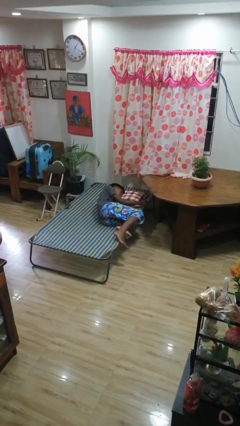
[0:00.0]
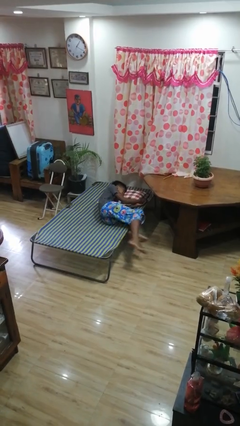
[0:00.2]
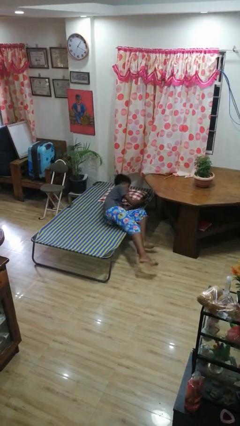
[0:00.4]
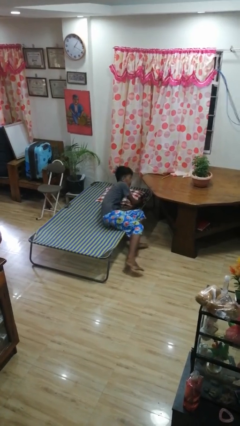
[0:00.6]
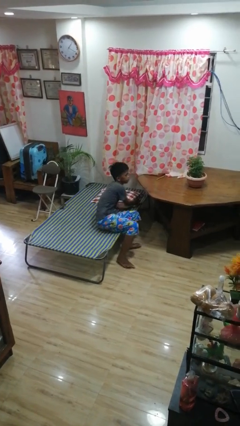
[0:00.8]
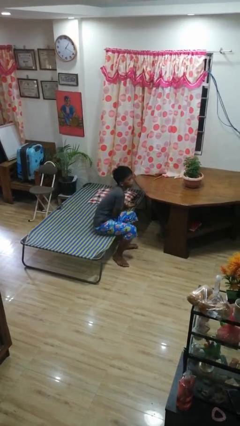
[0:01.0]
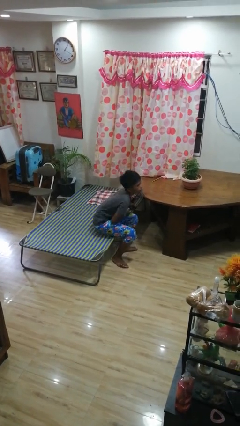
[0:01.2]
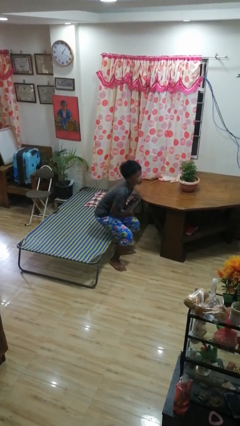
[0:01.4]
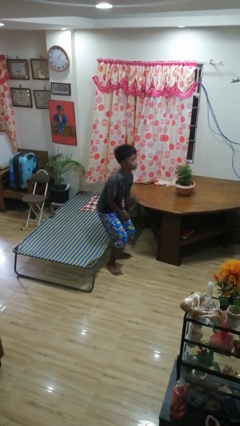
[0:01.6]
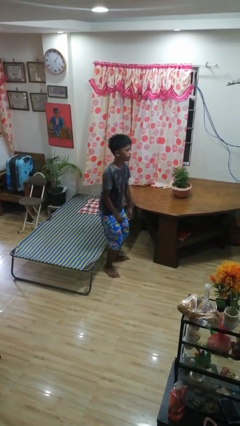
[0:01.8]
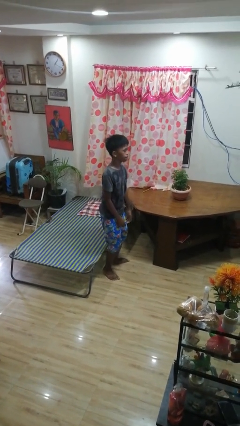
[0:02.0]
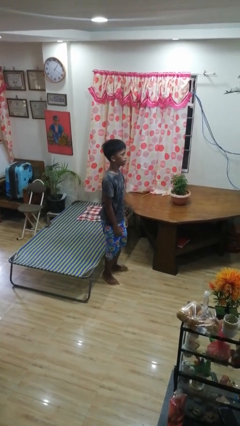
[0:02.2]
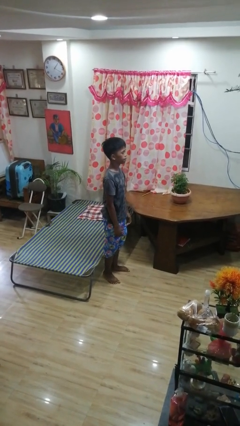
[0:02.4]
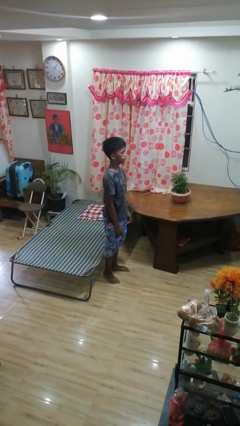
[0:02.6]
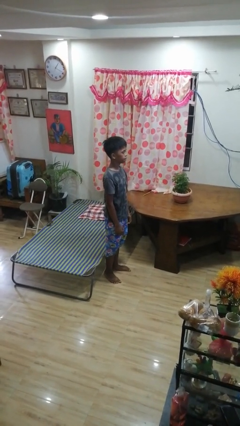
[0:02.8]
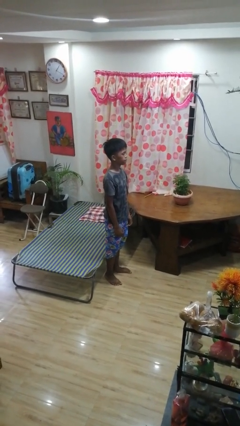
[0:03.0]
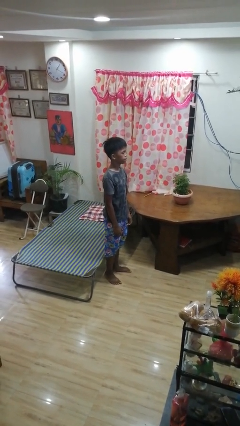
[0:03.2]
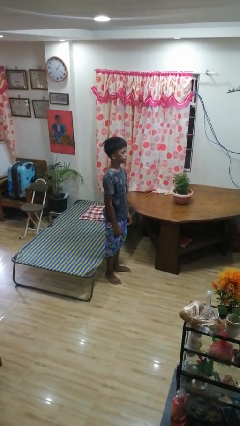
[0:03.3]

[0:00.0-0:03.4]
person stands up

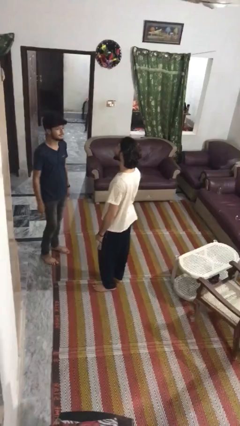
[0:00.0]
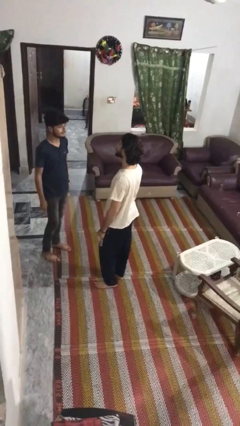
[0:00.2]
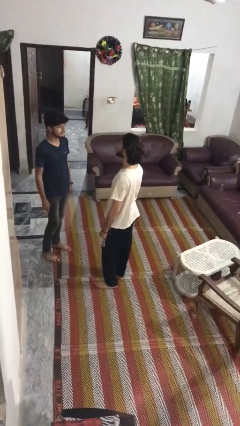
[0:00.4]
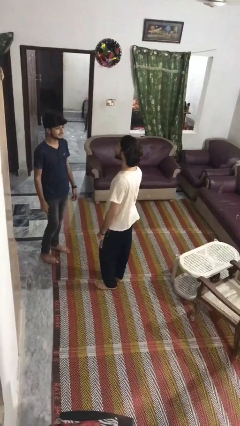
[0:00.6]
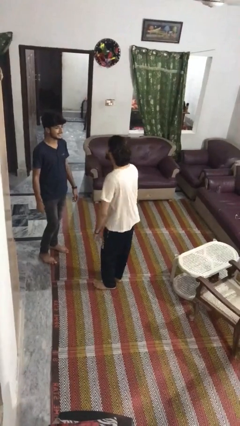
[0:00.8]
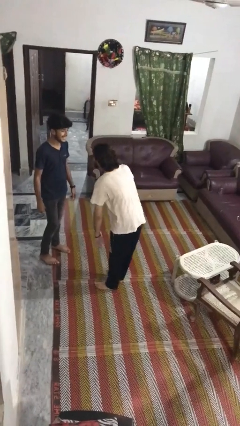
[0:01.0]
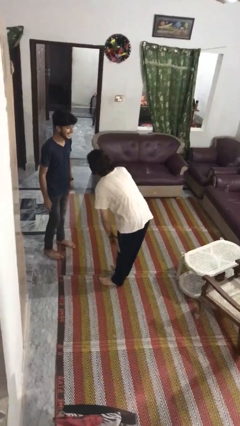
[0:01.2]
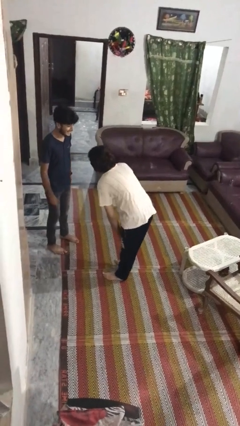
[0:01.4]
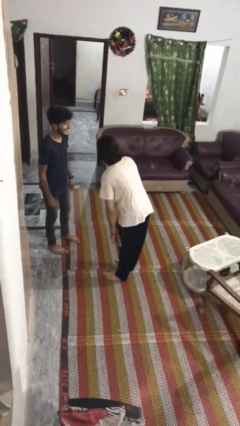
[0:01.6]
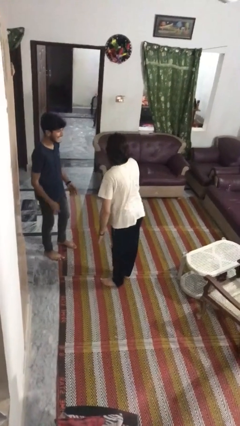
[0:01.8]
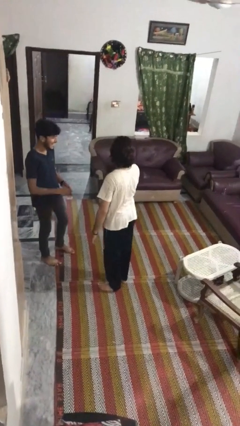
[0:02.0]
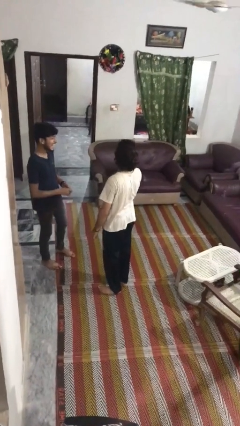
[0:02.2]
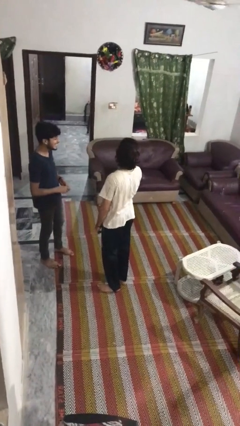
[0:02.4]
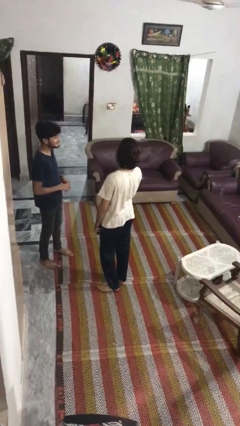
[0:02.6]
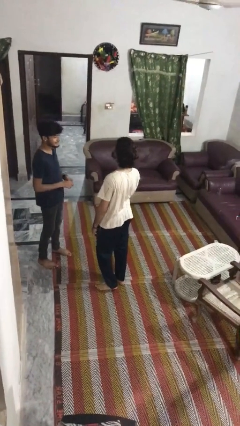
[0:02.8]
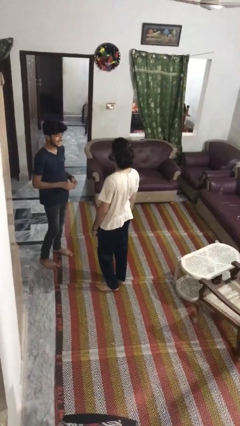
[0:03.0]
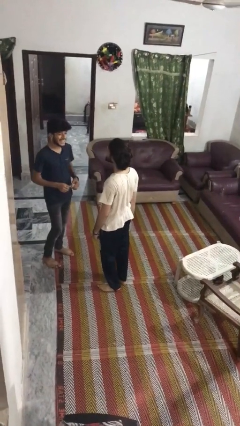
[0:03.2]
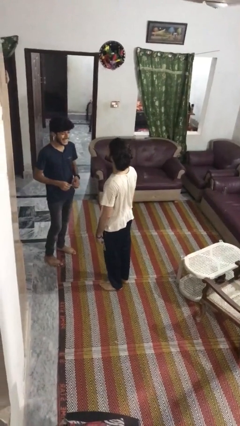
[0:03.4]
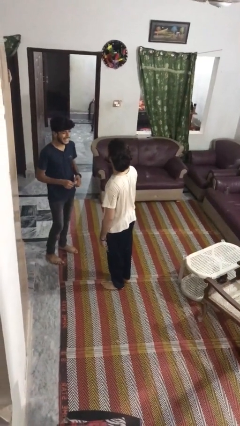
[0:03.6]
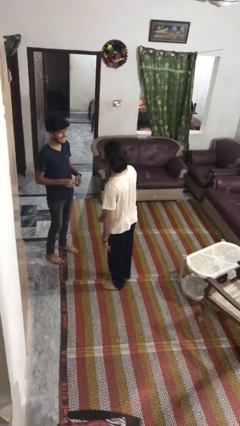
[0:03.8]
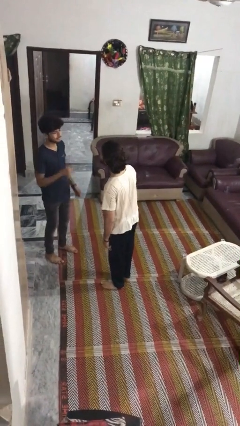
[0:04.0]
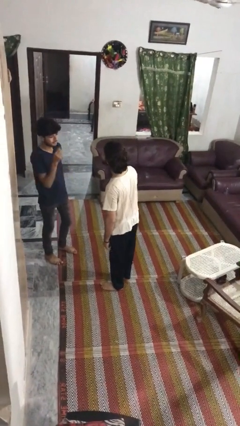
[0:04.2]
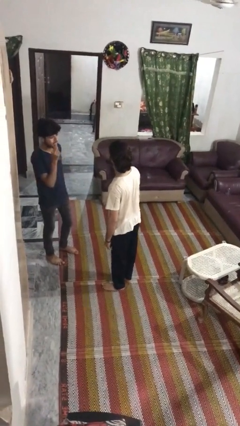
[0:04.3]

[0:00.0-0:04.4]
person laughs with person

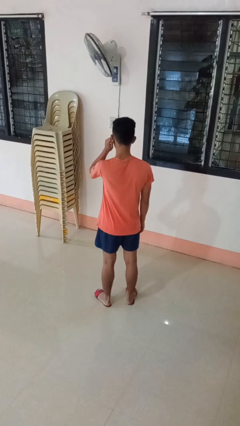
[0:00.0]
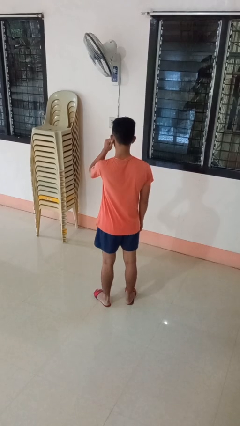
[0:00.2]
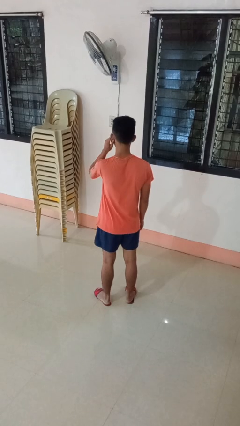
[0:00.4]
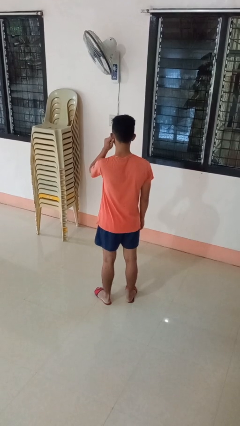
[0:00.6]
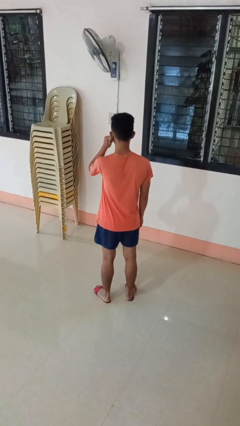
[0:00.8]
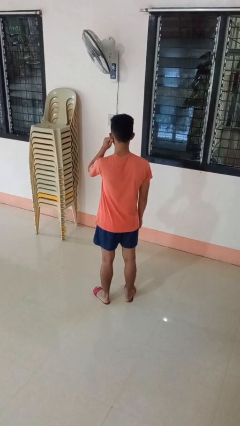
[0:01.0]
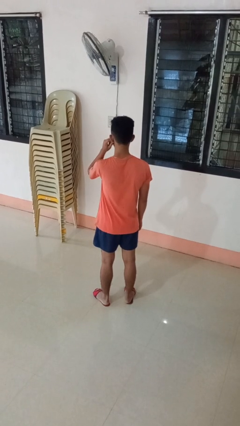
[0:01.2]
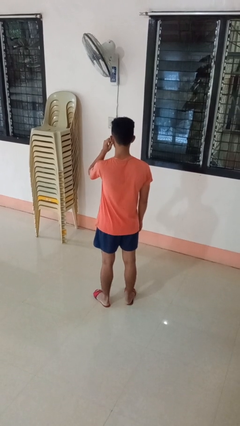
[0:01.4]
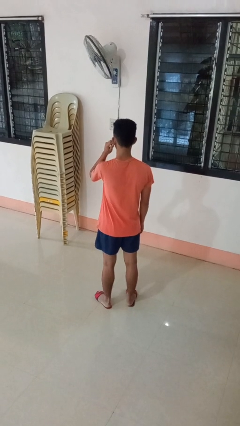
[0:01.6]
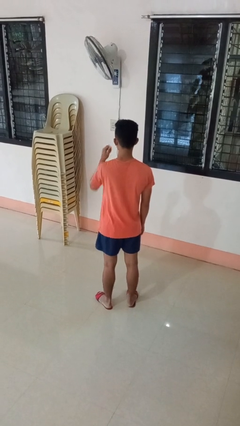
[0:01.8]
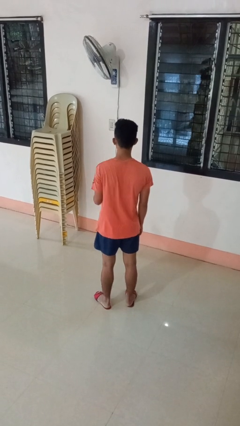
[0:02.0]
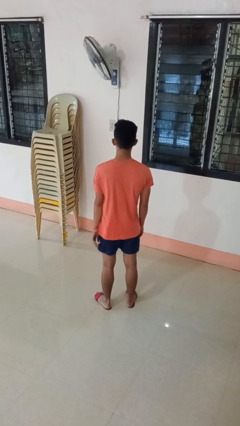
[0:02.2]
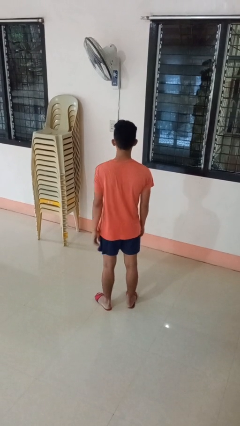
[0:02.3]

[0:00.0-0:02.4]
person touches earlobe

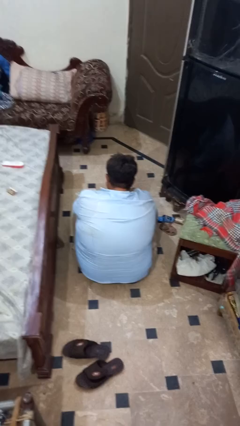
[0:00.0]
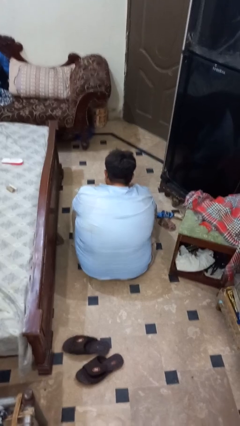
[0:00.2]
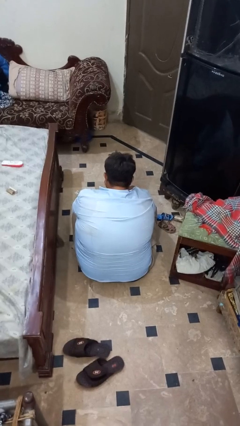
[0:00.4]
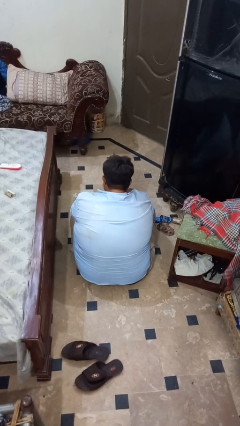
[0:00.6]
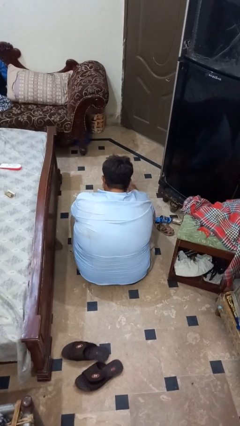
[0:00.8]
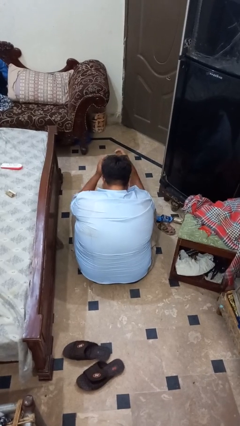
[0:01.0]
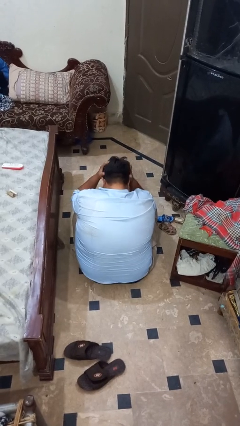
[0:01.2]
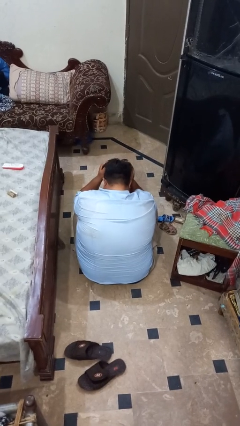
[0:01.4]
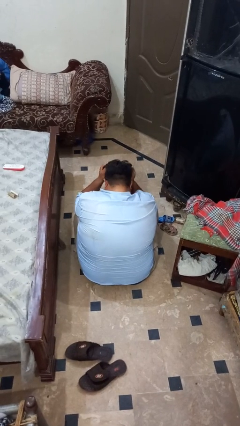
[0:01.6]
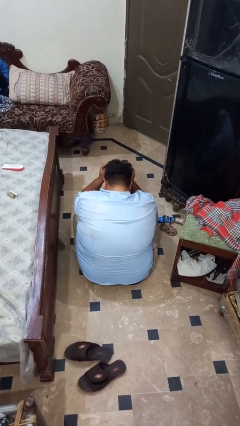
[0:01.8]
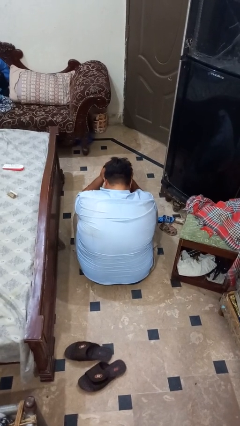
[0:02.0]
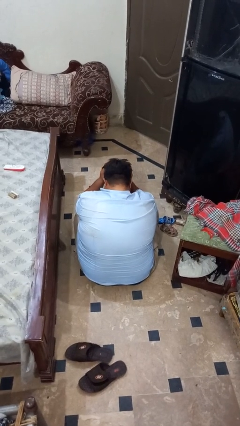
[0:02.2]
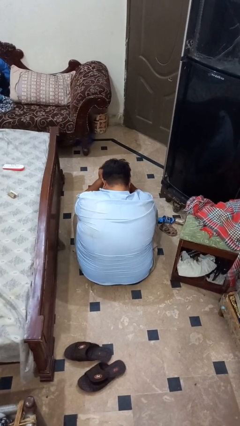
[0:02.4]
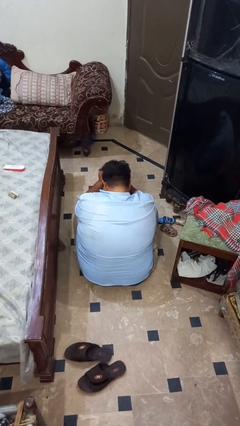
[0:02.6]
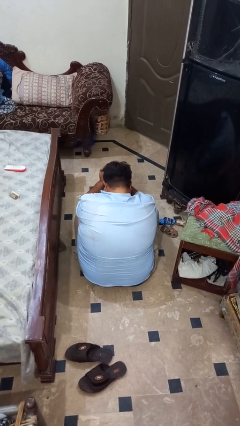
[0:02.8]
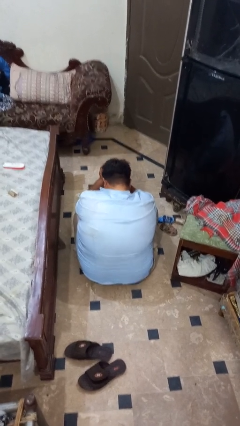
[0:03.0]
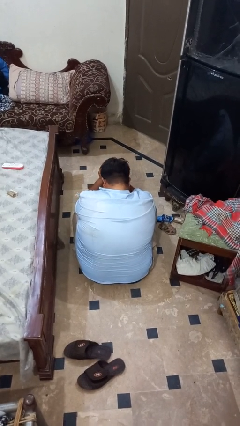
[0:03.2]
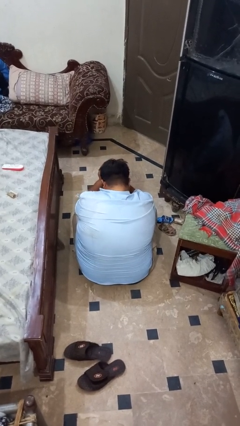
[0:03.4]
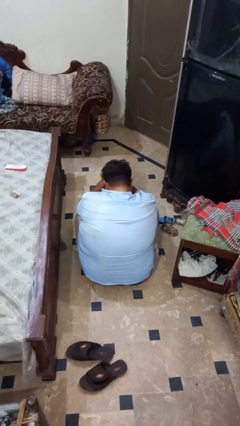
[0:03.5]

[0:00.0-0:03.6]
person strokes hair

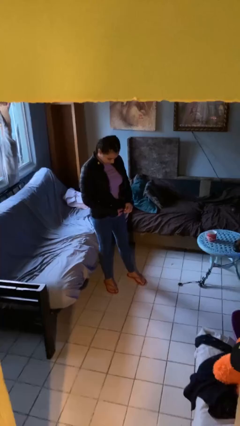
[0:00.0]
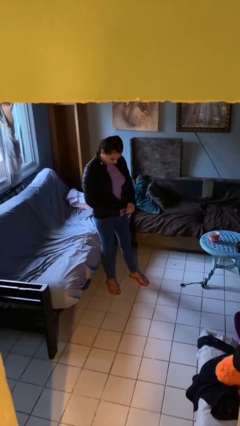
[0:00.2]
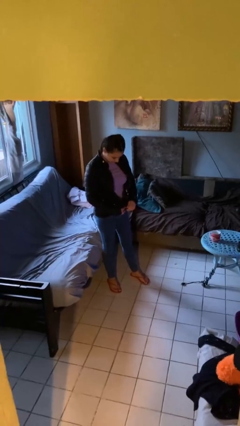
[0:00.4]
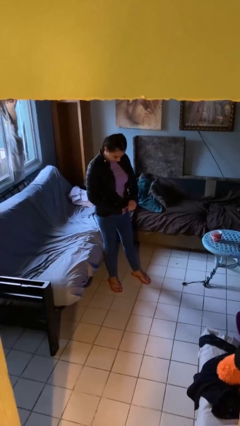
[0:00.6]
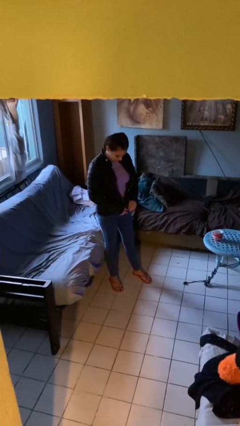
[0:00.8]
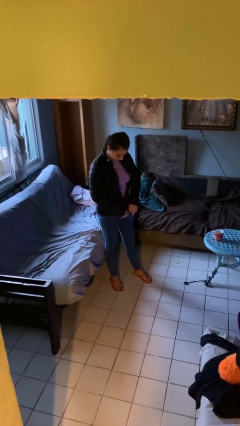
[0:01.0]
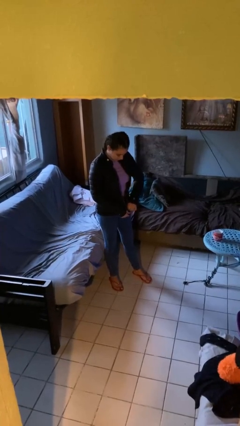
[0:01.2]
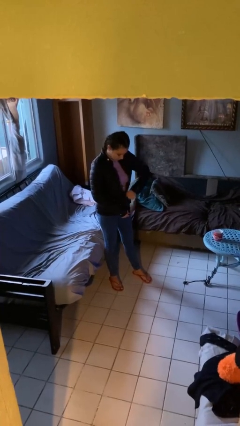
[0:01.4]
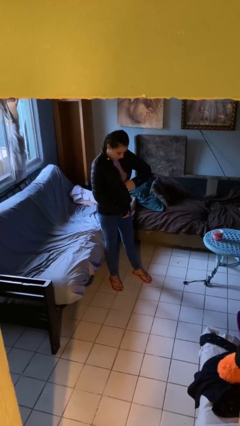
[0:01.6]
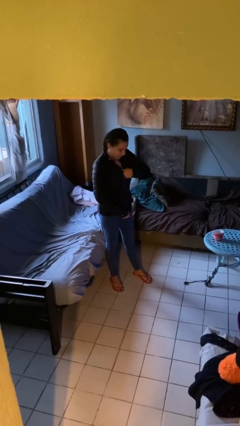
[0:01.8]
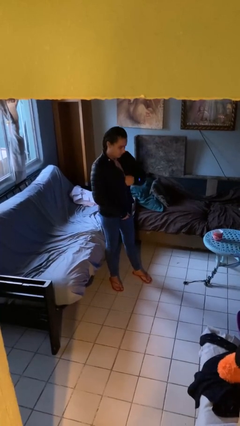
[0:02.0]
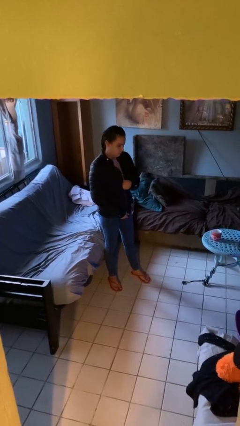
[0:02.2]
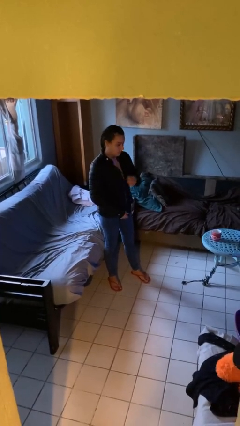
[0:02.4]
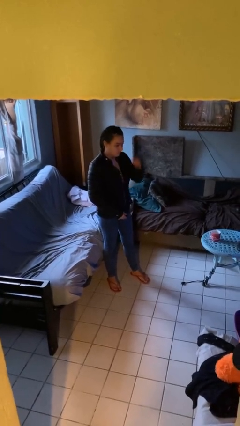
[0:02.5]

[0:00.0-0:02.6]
person zips up jacket

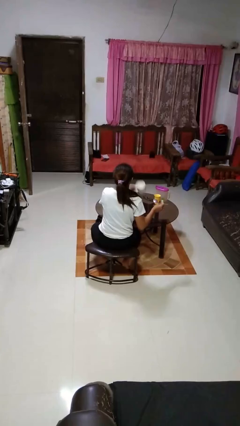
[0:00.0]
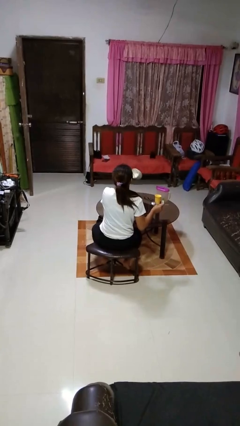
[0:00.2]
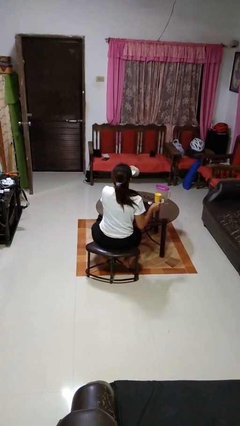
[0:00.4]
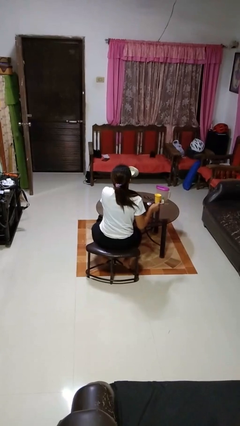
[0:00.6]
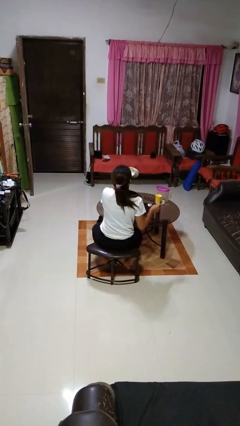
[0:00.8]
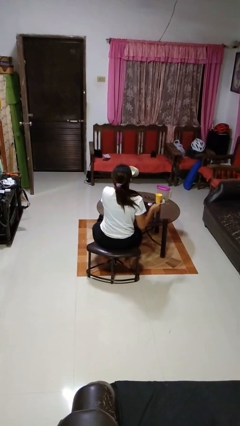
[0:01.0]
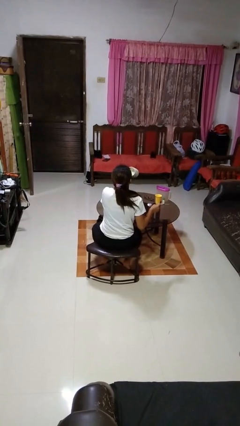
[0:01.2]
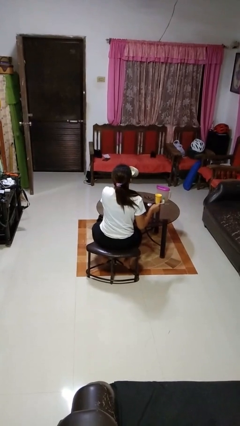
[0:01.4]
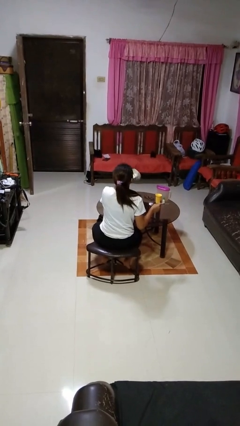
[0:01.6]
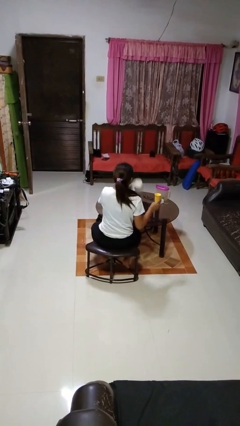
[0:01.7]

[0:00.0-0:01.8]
person drinks from mug
